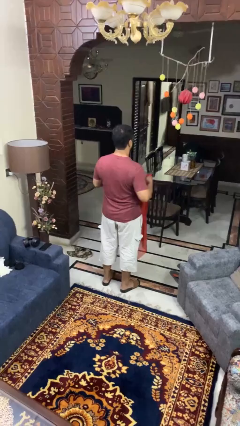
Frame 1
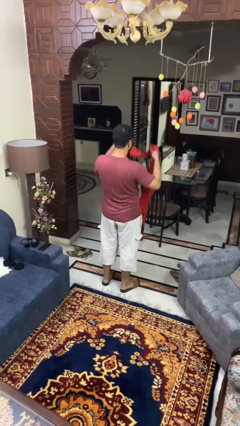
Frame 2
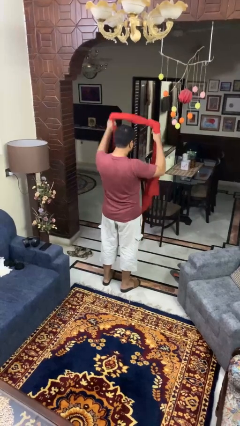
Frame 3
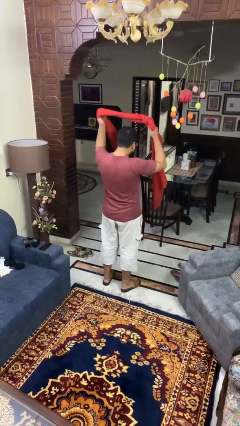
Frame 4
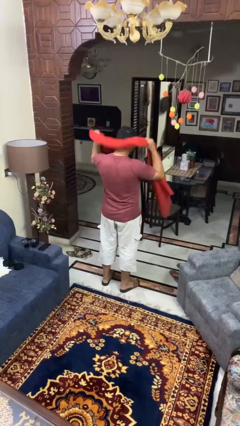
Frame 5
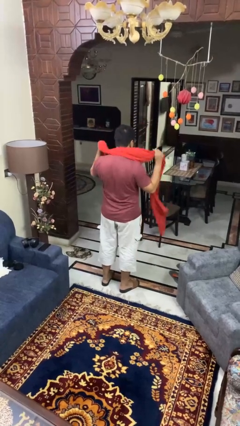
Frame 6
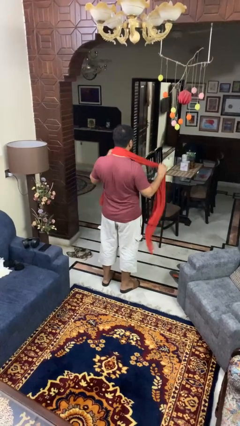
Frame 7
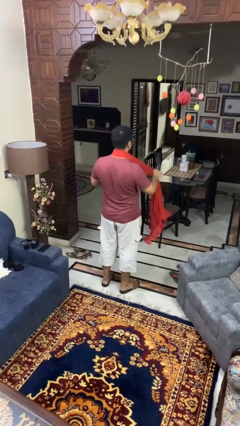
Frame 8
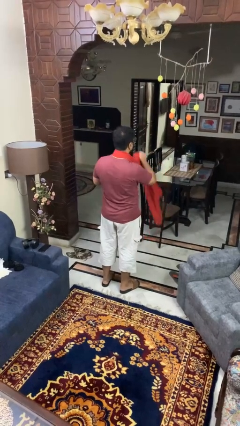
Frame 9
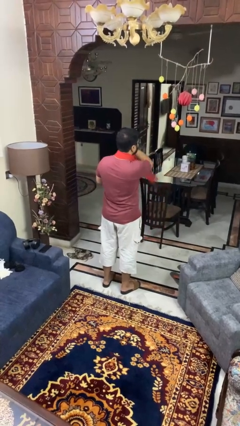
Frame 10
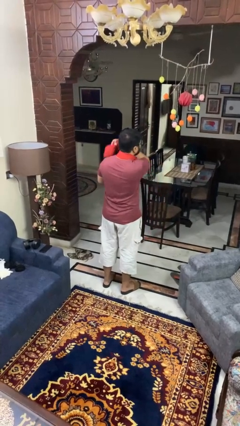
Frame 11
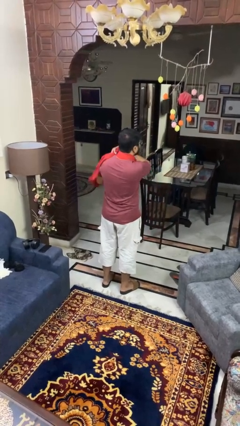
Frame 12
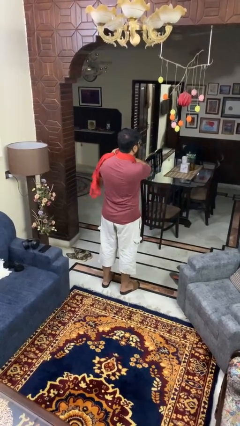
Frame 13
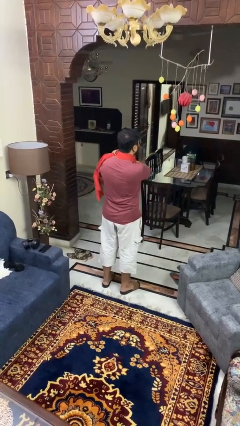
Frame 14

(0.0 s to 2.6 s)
person puts on scarf

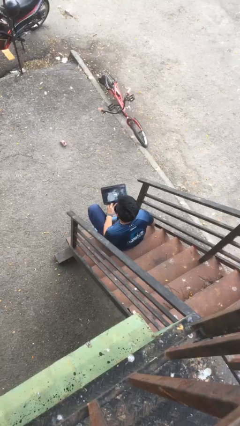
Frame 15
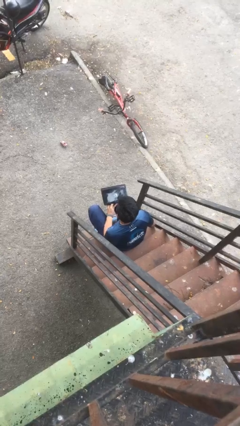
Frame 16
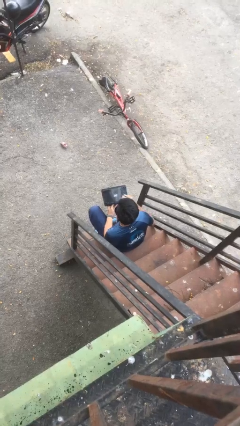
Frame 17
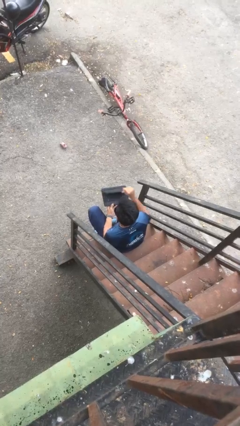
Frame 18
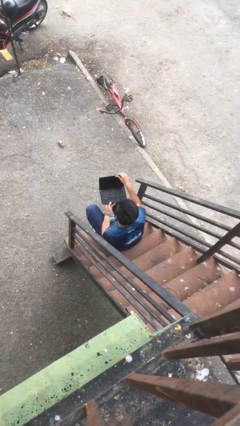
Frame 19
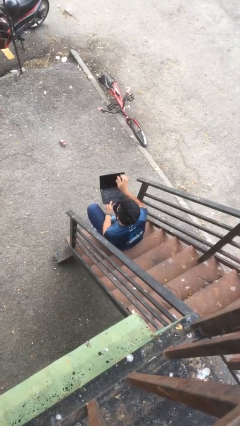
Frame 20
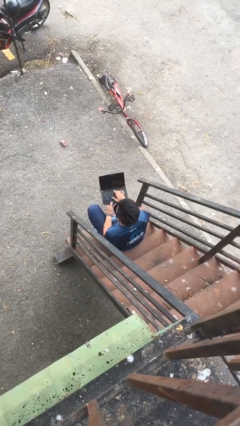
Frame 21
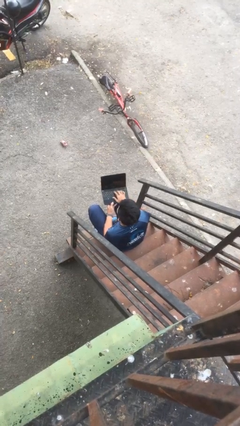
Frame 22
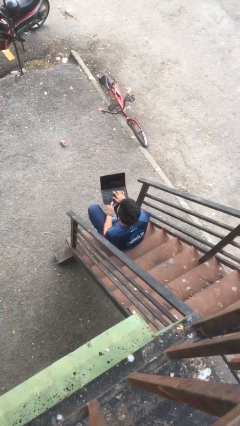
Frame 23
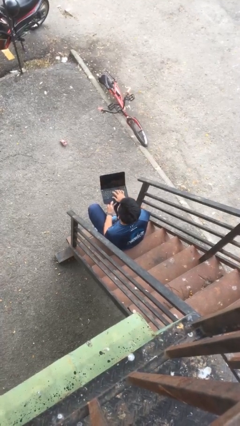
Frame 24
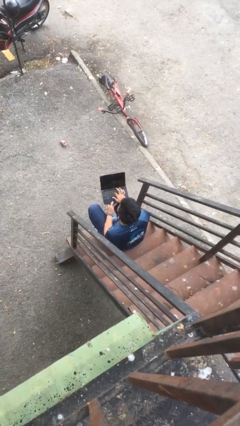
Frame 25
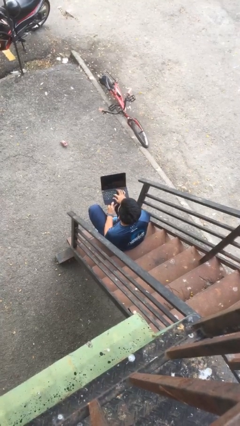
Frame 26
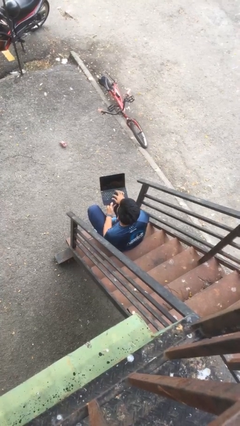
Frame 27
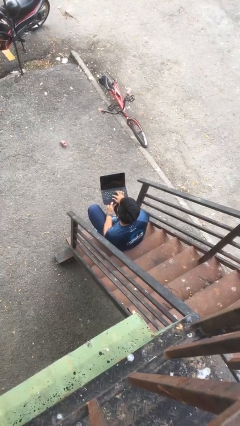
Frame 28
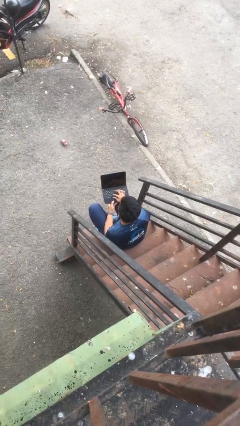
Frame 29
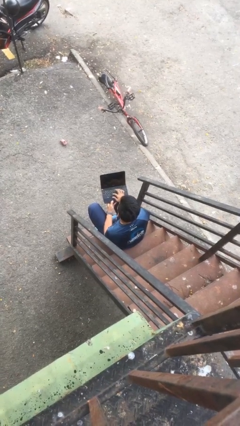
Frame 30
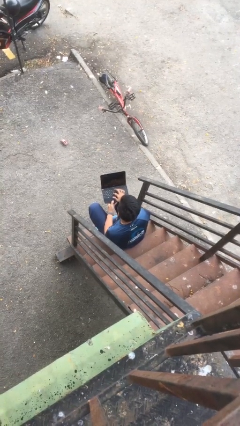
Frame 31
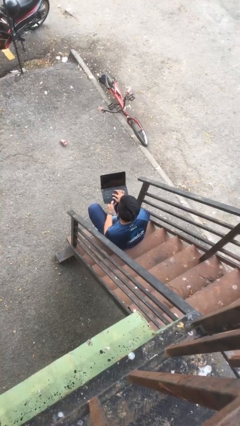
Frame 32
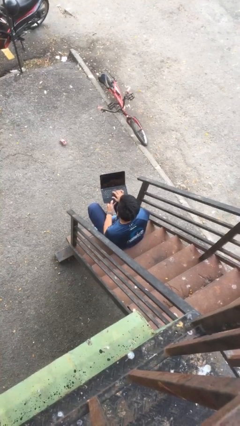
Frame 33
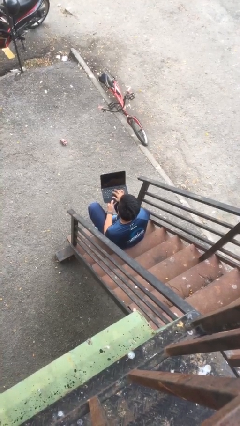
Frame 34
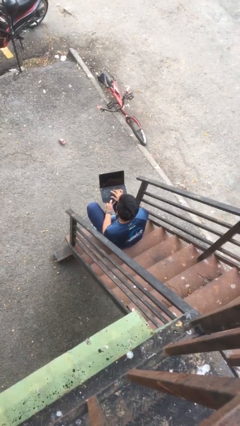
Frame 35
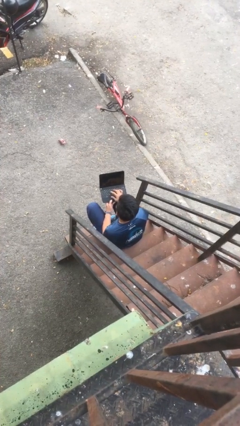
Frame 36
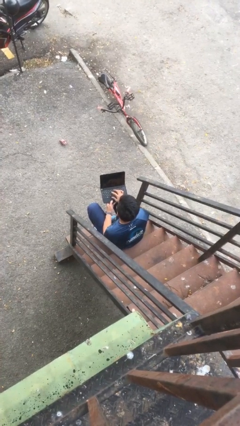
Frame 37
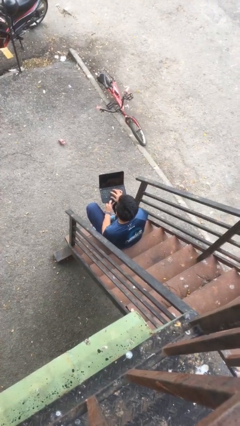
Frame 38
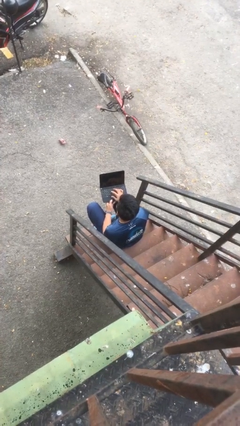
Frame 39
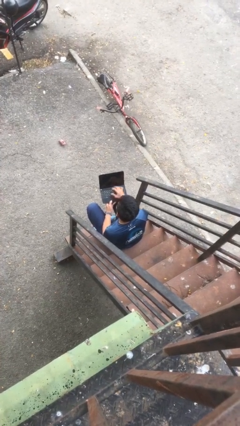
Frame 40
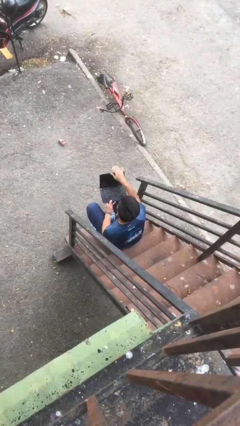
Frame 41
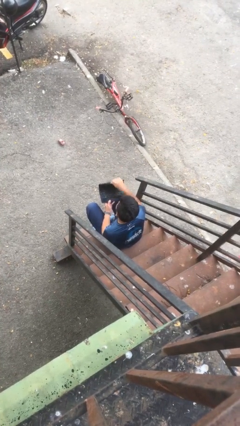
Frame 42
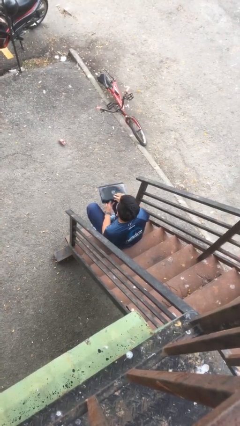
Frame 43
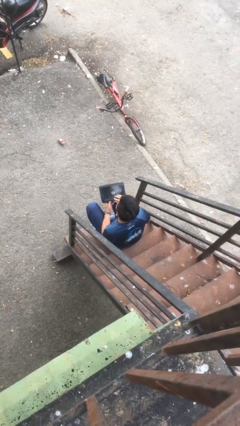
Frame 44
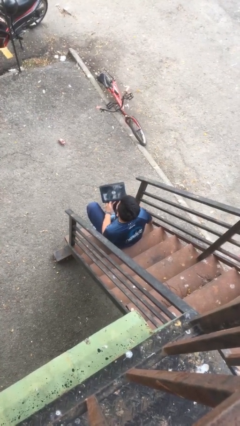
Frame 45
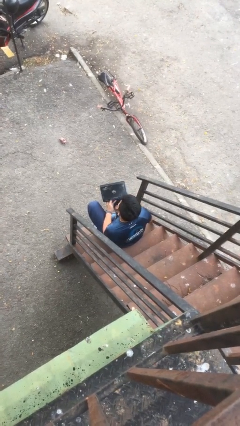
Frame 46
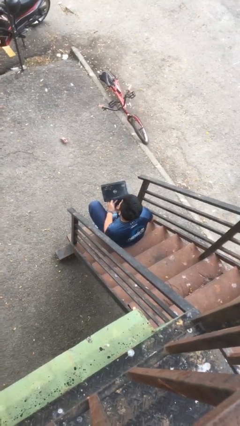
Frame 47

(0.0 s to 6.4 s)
person interacts with laptop

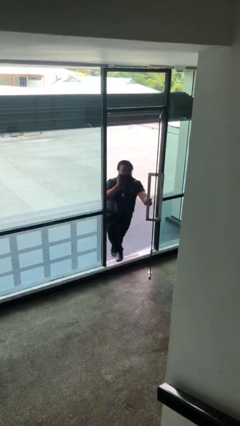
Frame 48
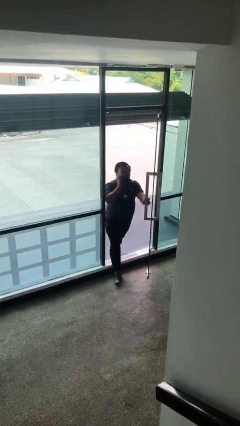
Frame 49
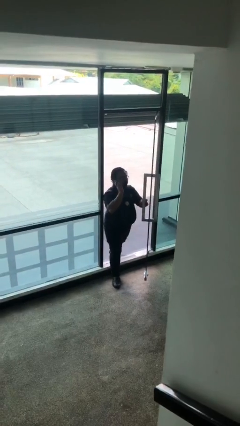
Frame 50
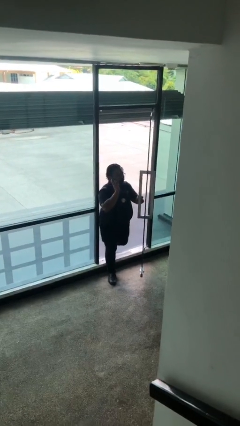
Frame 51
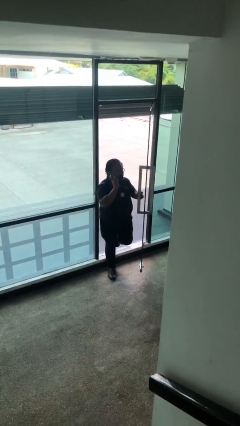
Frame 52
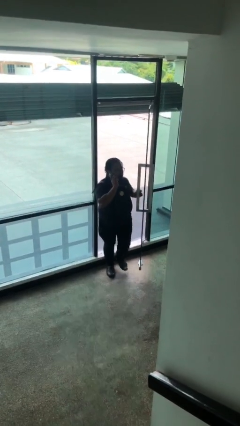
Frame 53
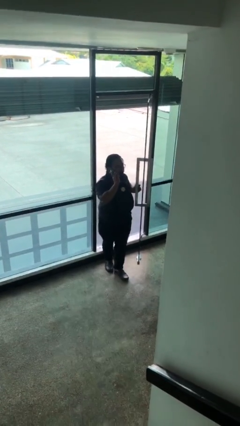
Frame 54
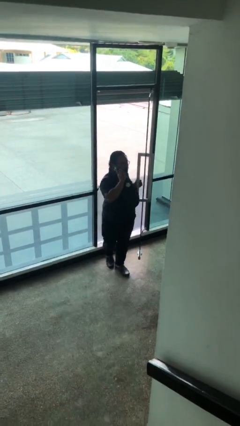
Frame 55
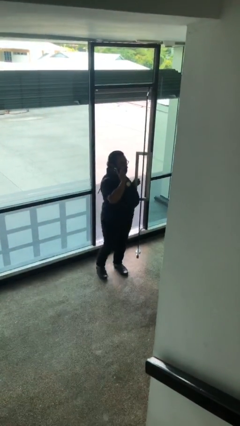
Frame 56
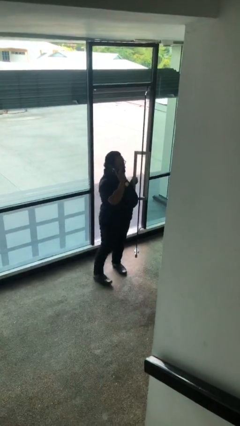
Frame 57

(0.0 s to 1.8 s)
person enters scene through structure

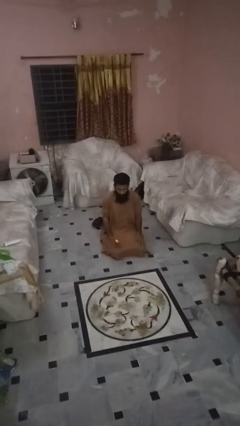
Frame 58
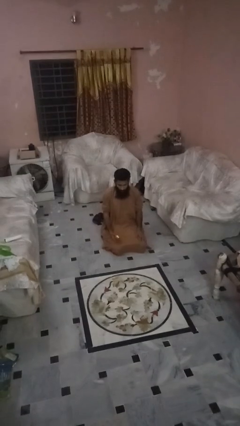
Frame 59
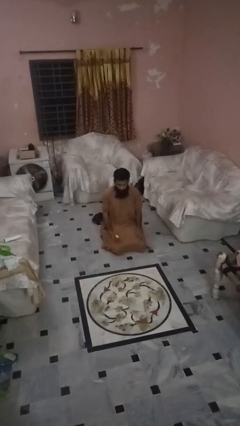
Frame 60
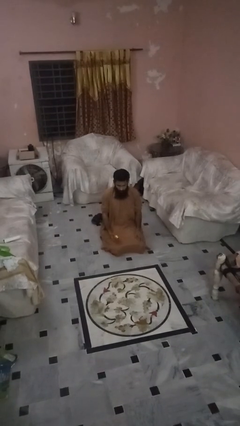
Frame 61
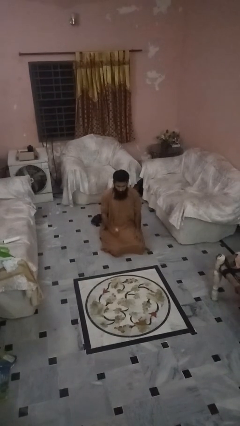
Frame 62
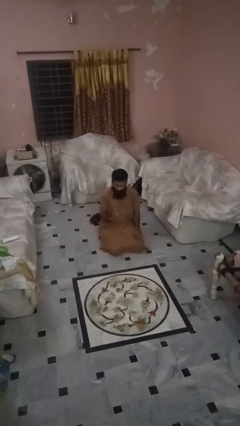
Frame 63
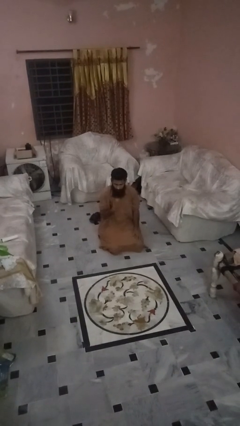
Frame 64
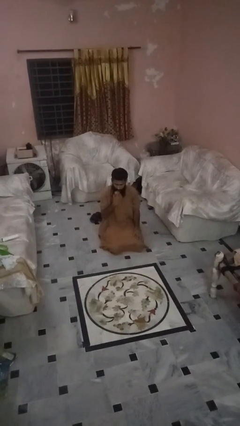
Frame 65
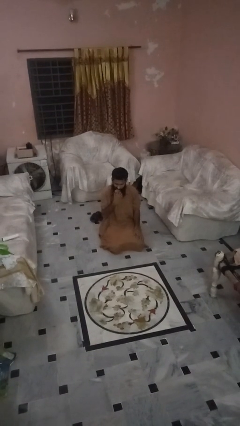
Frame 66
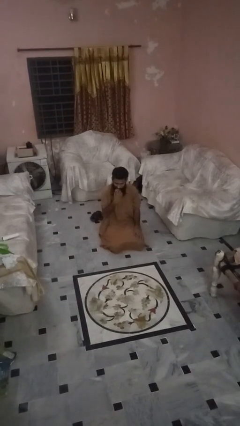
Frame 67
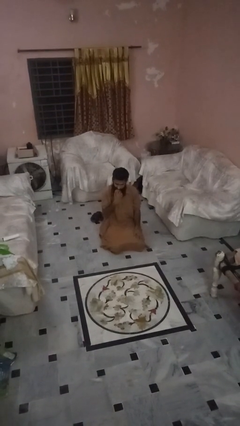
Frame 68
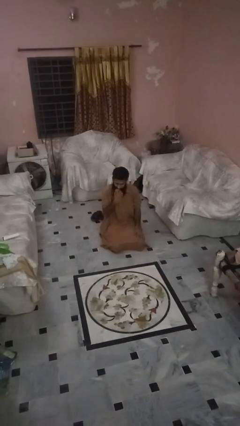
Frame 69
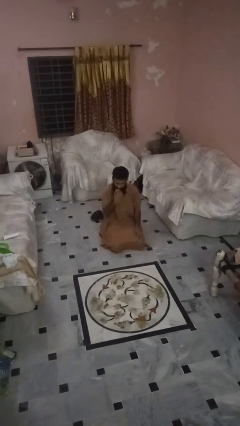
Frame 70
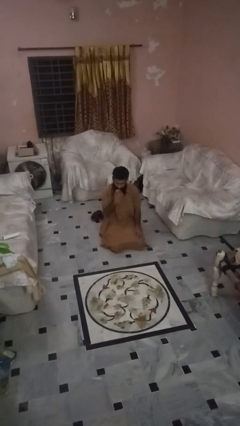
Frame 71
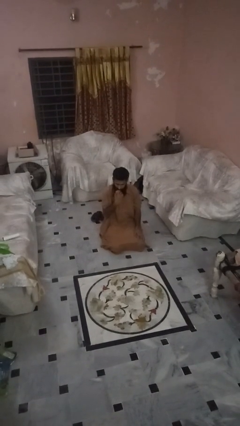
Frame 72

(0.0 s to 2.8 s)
person eats apple

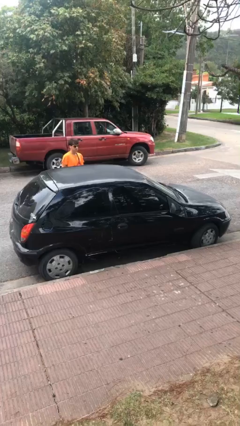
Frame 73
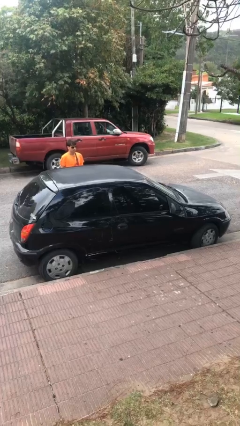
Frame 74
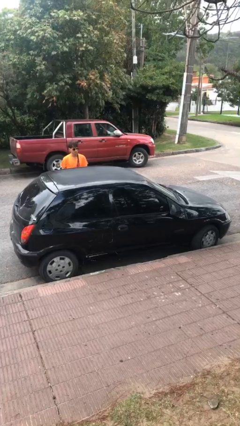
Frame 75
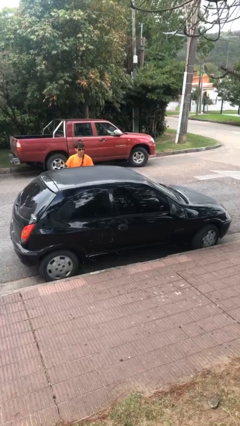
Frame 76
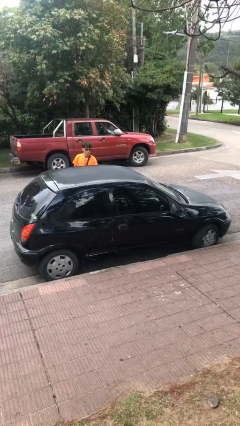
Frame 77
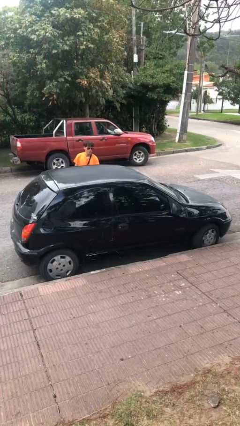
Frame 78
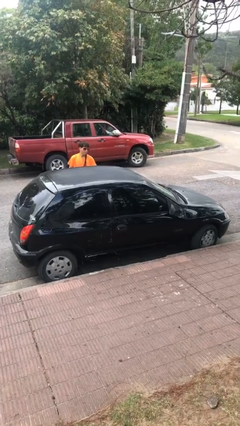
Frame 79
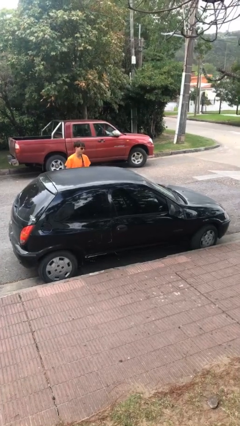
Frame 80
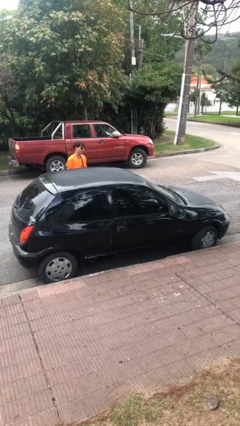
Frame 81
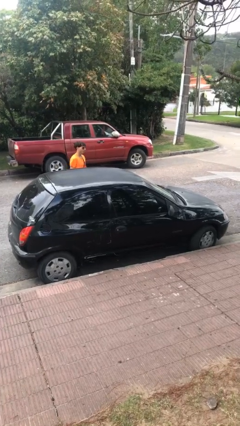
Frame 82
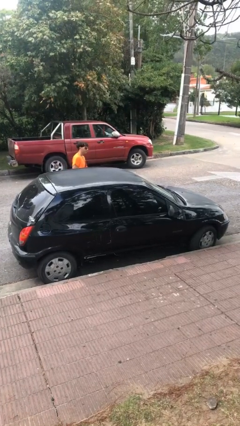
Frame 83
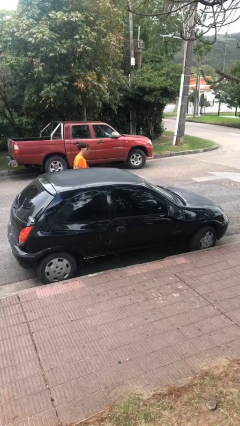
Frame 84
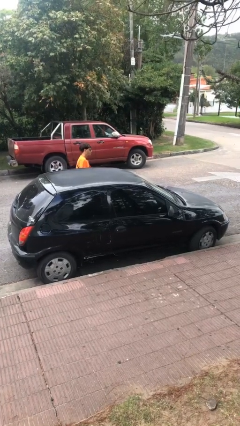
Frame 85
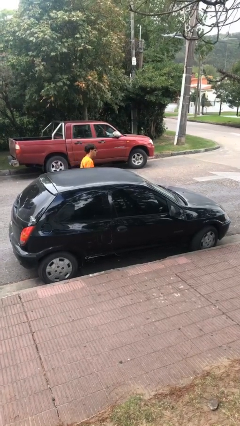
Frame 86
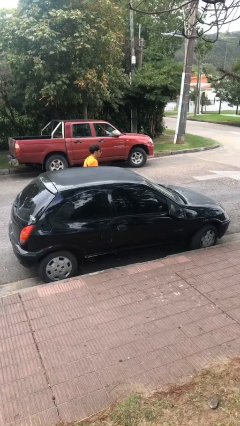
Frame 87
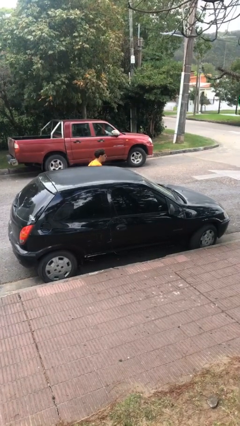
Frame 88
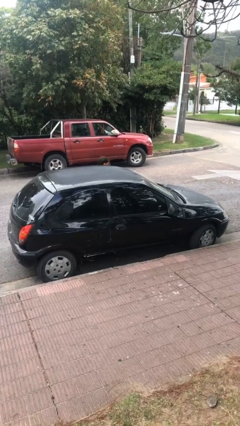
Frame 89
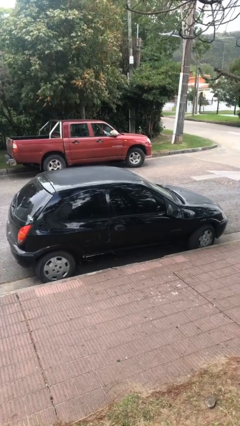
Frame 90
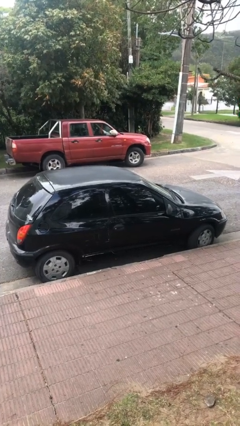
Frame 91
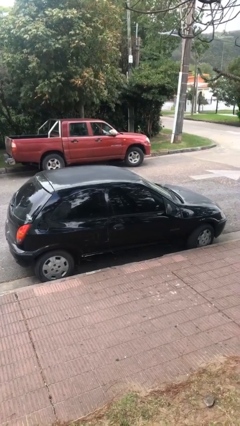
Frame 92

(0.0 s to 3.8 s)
car picks up person

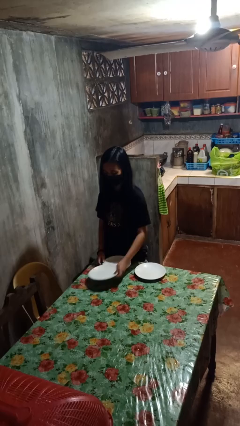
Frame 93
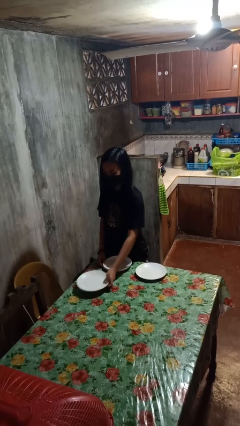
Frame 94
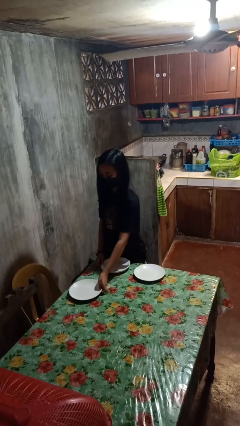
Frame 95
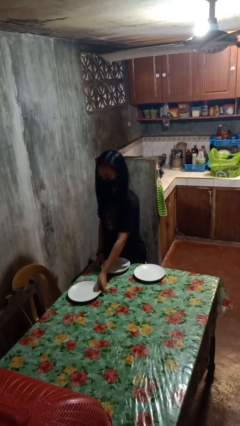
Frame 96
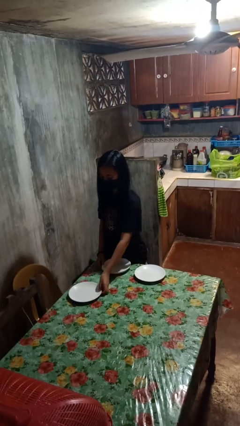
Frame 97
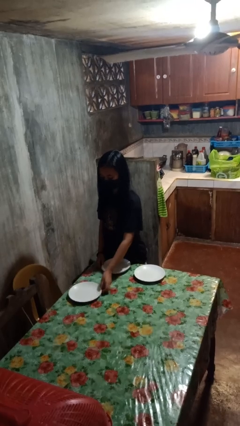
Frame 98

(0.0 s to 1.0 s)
person sets table
